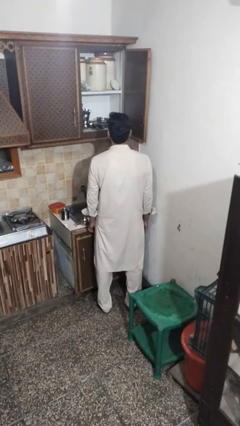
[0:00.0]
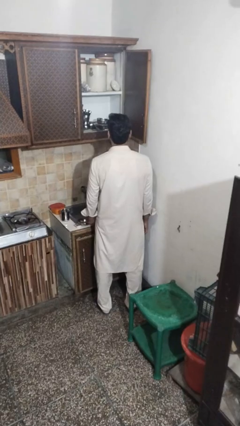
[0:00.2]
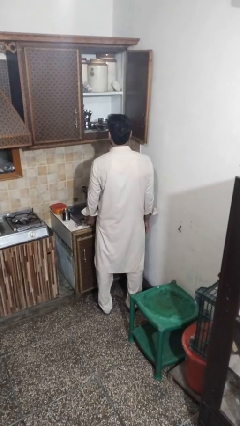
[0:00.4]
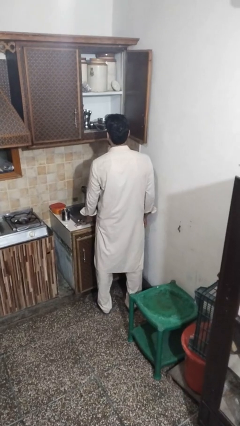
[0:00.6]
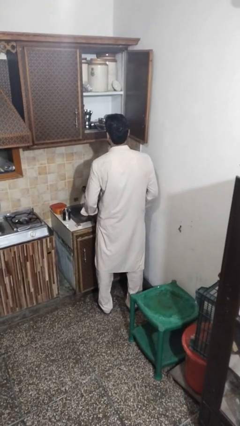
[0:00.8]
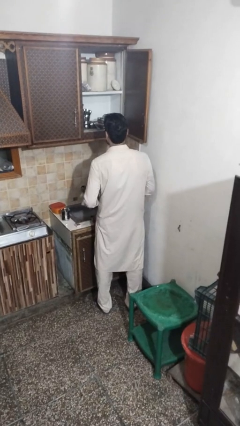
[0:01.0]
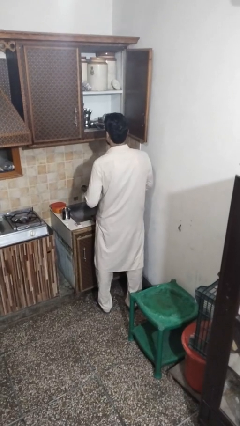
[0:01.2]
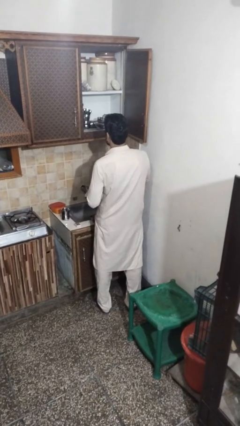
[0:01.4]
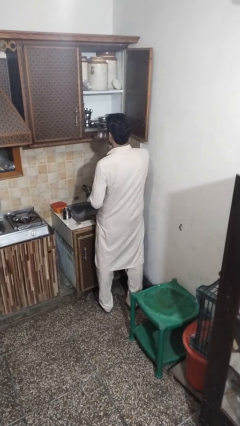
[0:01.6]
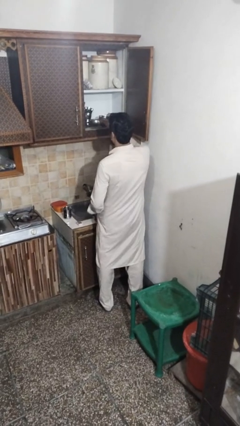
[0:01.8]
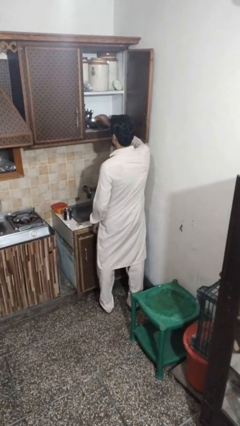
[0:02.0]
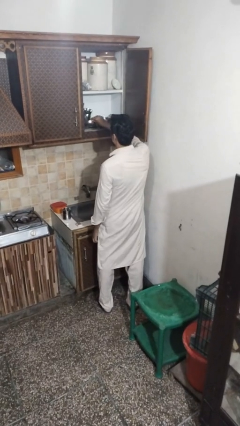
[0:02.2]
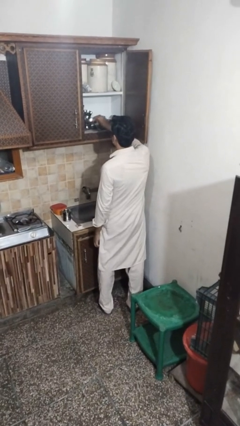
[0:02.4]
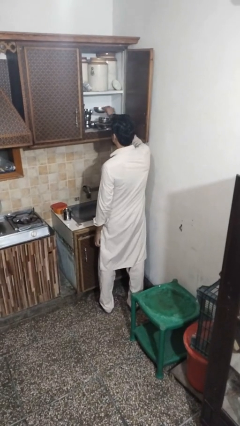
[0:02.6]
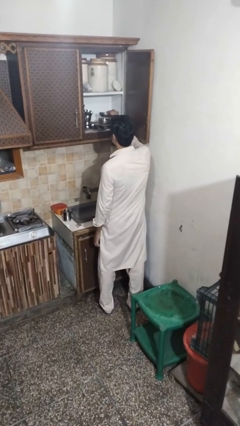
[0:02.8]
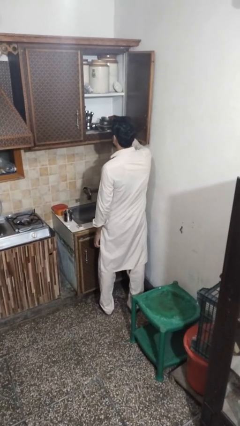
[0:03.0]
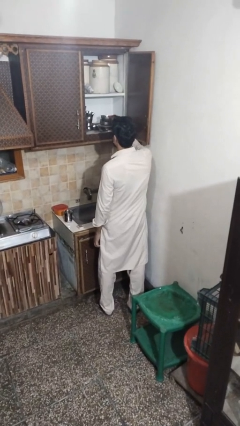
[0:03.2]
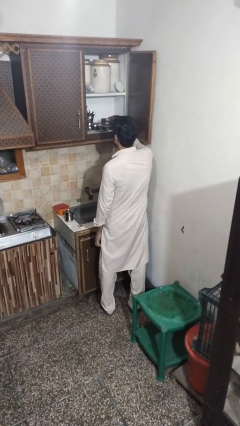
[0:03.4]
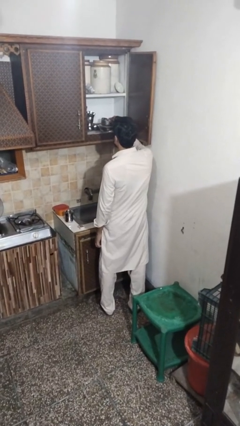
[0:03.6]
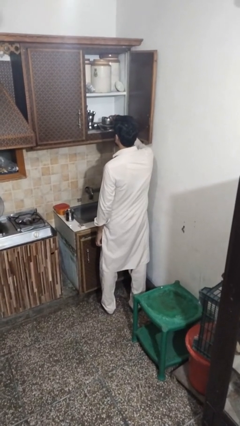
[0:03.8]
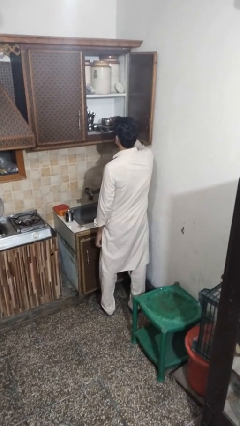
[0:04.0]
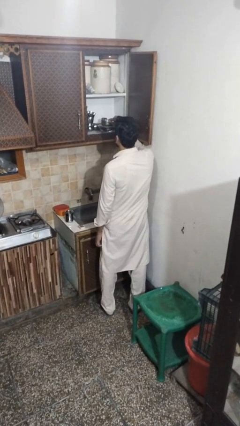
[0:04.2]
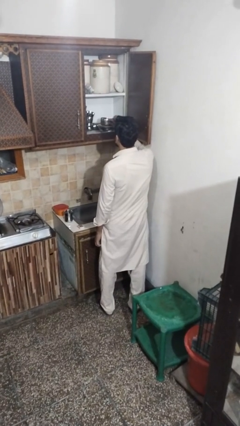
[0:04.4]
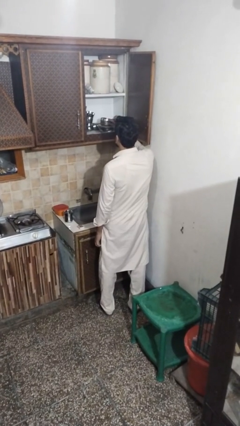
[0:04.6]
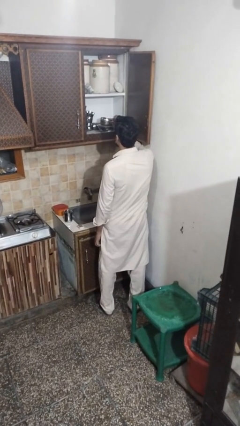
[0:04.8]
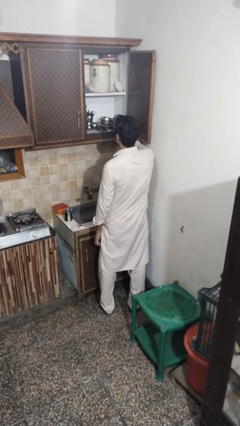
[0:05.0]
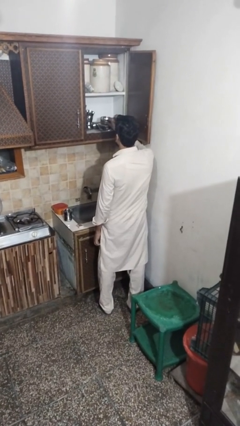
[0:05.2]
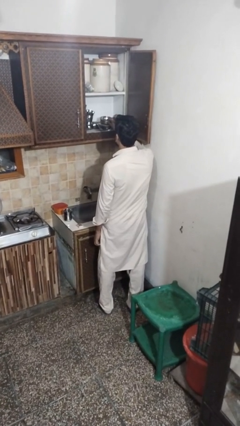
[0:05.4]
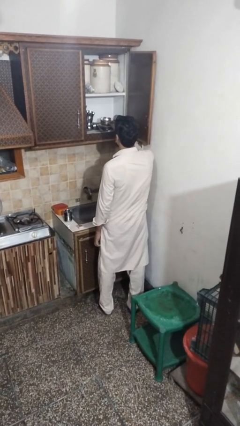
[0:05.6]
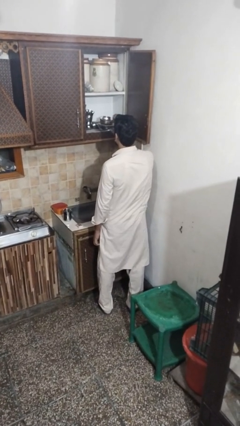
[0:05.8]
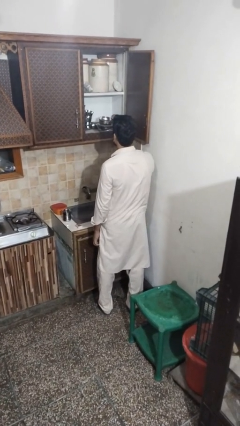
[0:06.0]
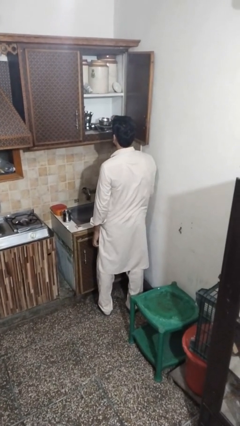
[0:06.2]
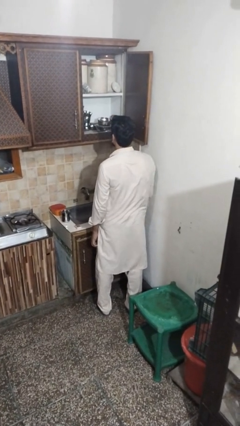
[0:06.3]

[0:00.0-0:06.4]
person puts object in cabinet

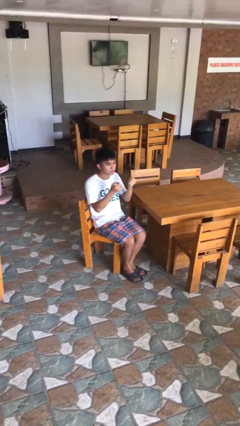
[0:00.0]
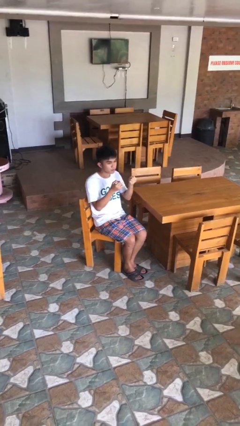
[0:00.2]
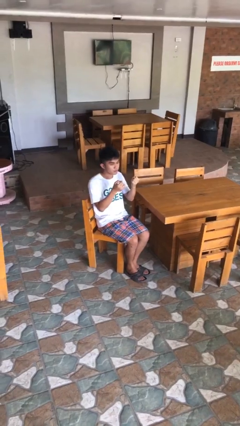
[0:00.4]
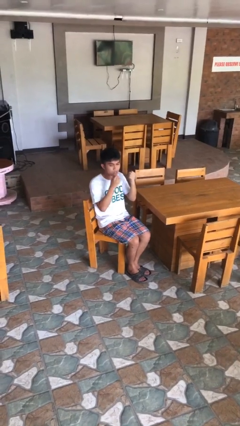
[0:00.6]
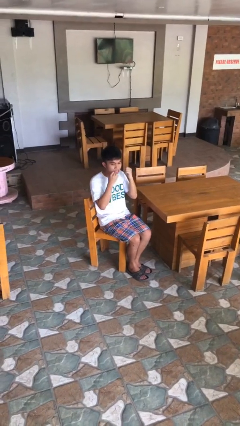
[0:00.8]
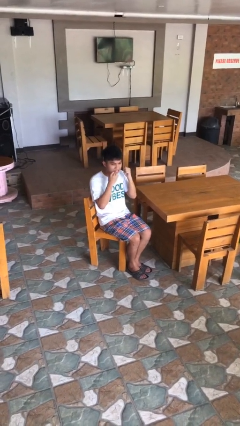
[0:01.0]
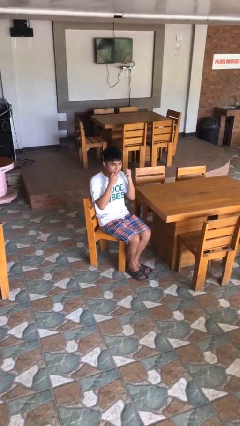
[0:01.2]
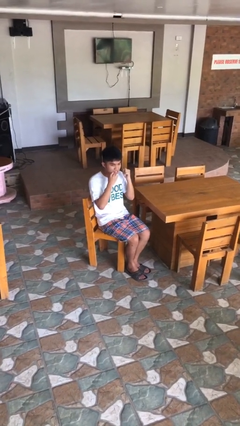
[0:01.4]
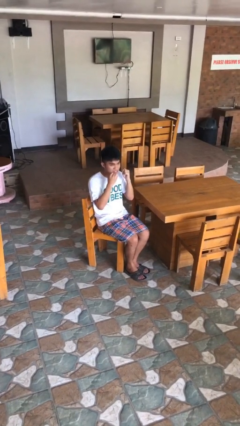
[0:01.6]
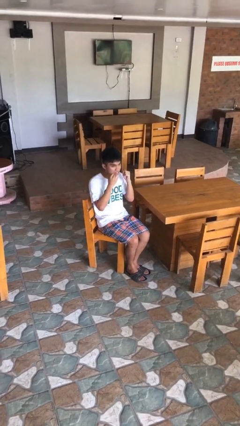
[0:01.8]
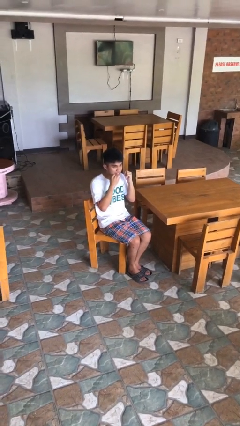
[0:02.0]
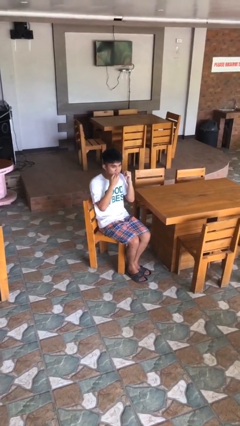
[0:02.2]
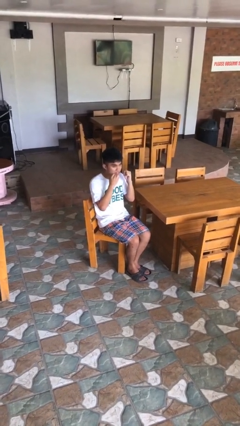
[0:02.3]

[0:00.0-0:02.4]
person flosses

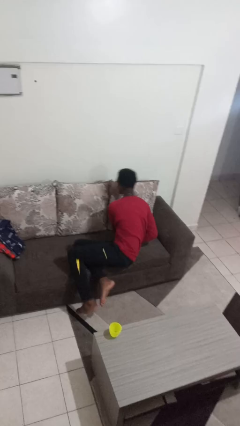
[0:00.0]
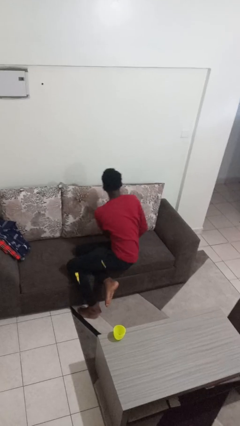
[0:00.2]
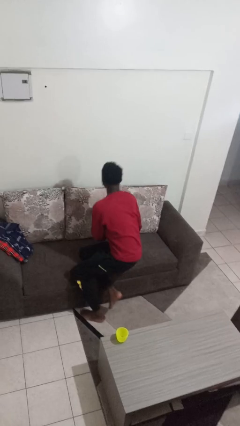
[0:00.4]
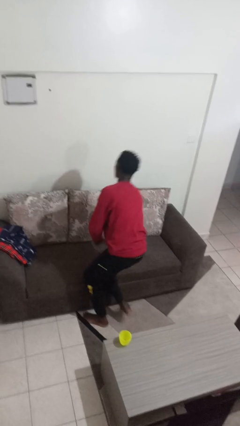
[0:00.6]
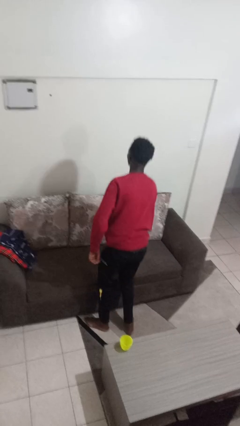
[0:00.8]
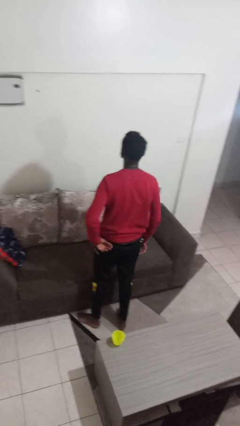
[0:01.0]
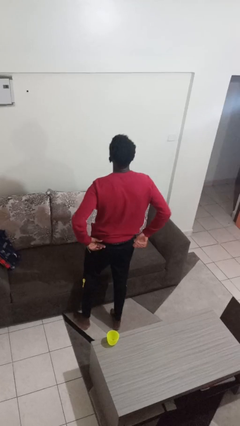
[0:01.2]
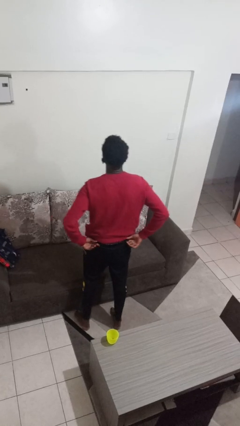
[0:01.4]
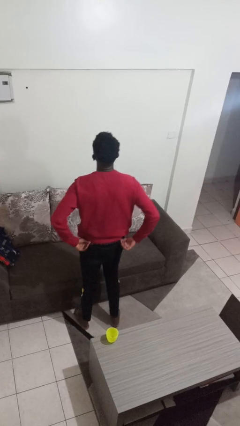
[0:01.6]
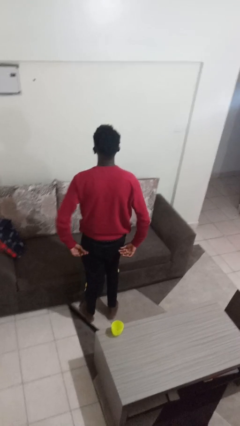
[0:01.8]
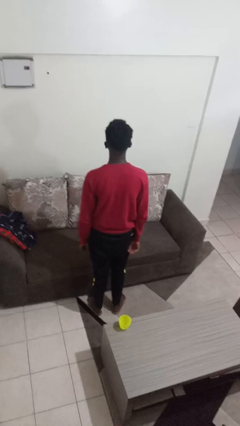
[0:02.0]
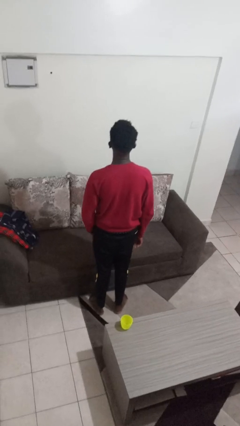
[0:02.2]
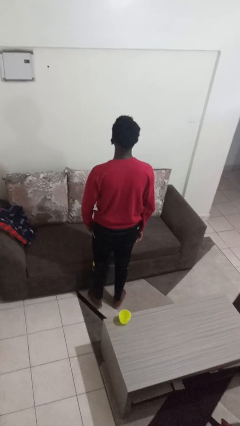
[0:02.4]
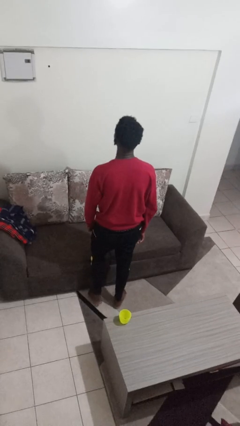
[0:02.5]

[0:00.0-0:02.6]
person stands up

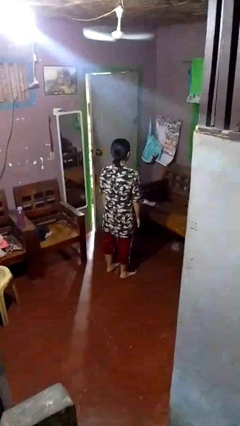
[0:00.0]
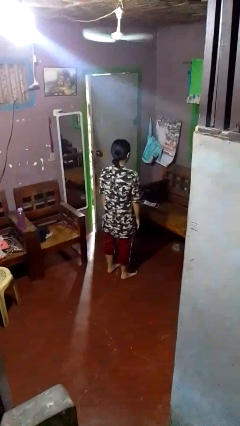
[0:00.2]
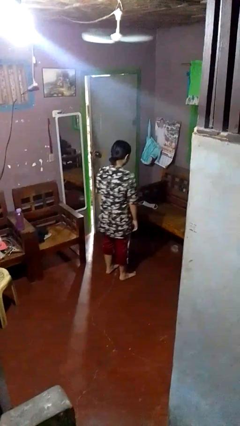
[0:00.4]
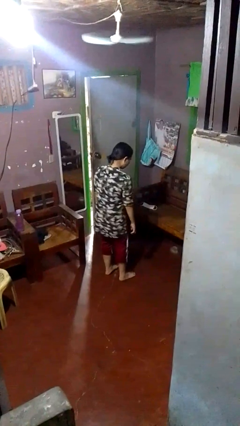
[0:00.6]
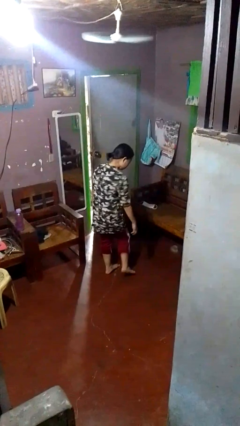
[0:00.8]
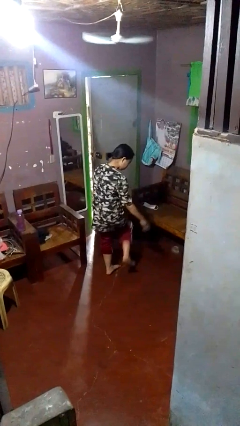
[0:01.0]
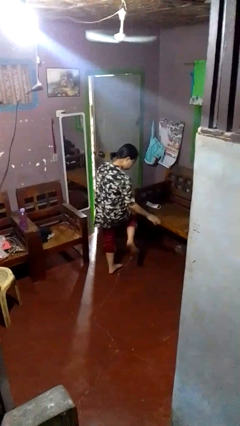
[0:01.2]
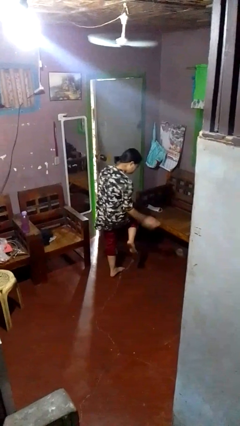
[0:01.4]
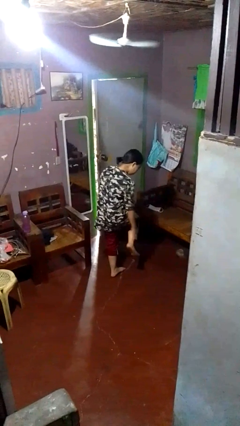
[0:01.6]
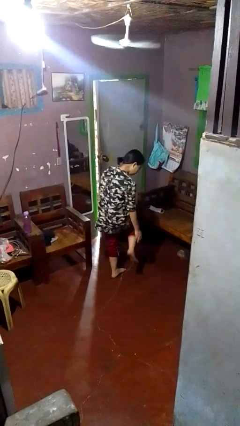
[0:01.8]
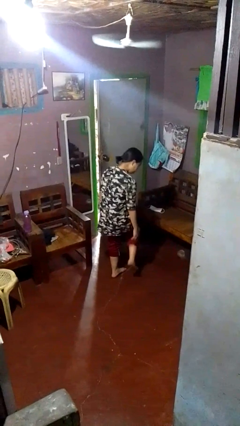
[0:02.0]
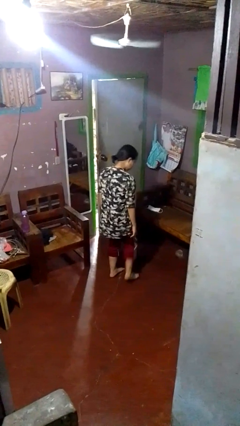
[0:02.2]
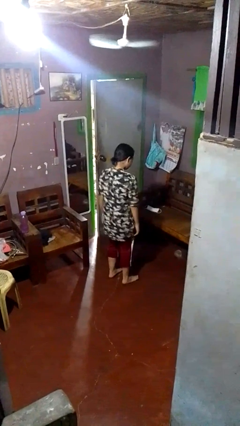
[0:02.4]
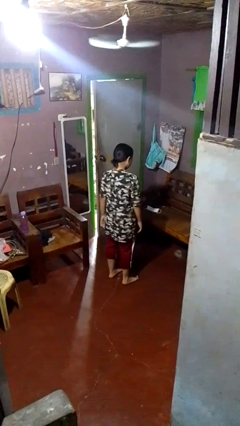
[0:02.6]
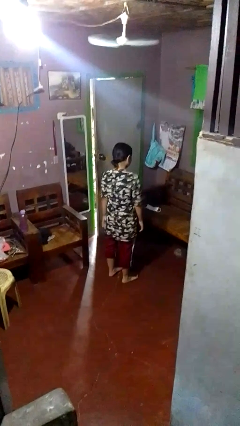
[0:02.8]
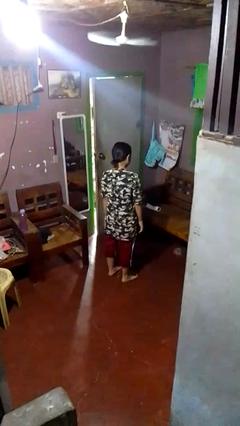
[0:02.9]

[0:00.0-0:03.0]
person swats bug

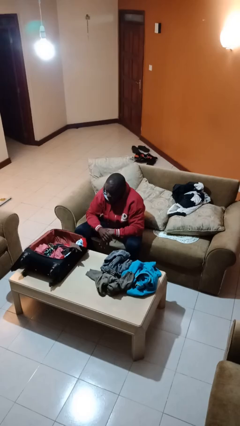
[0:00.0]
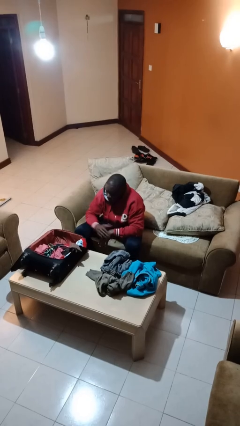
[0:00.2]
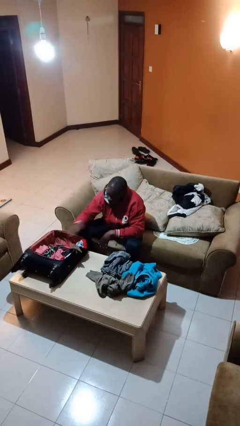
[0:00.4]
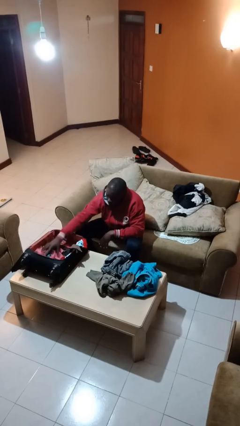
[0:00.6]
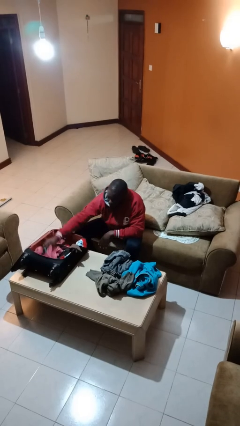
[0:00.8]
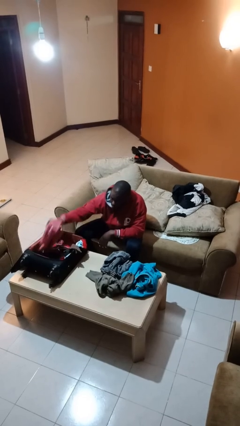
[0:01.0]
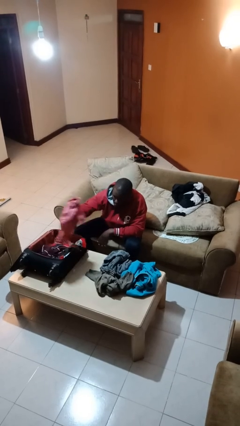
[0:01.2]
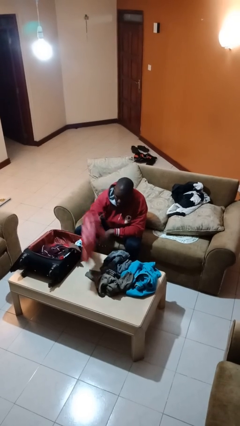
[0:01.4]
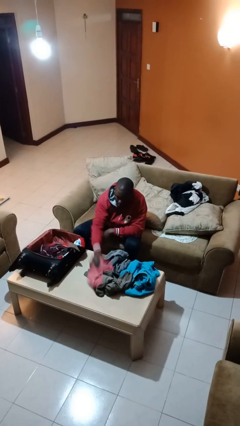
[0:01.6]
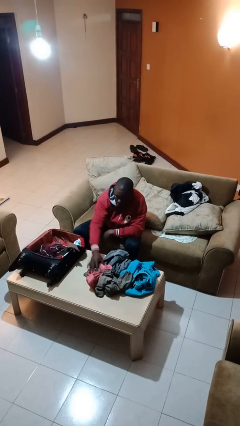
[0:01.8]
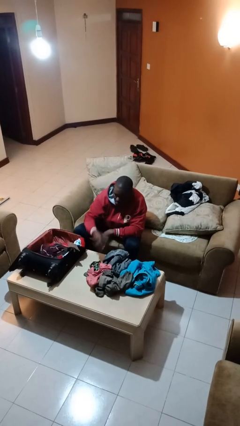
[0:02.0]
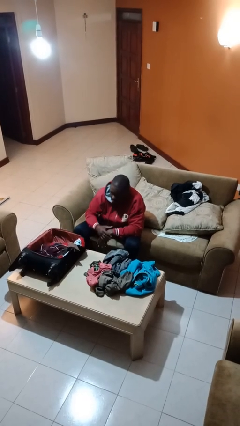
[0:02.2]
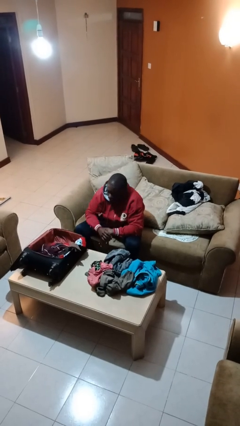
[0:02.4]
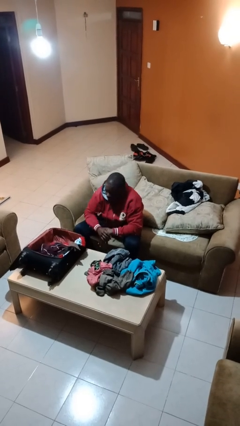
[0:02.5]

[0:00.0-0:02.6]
person unloads clothes from suitcase

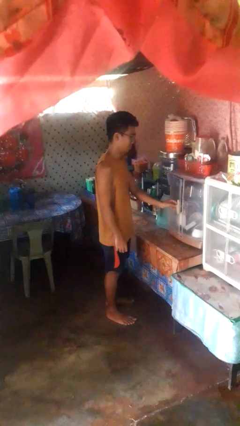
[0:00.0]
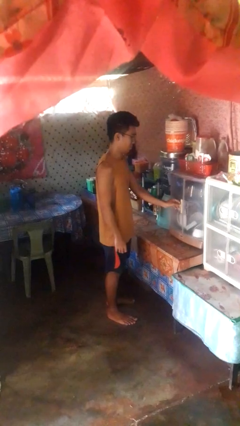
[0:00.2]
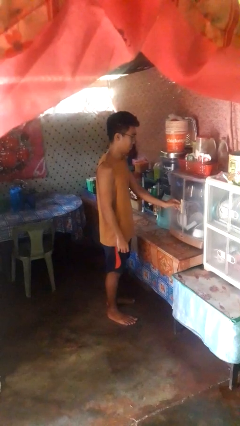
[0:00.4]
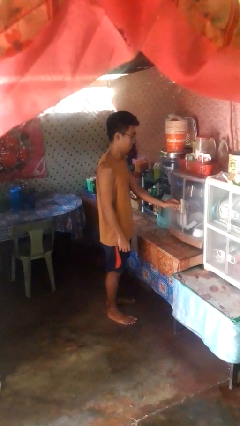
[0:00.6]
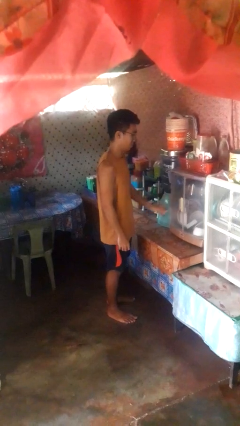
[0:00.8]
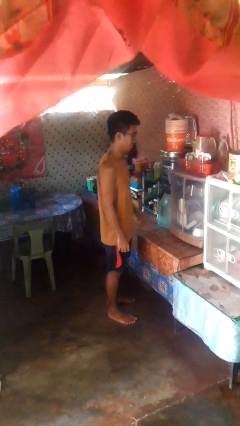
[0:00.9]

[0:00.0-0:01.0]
person closes cabinet
